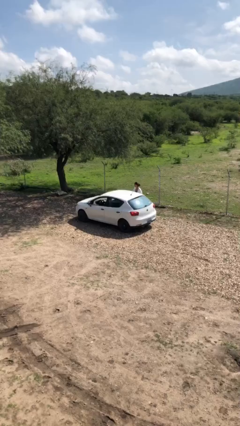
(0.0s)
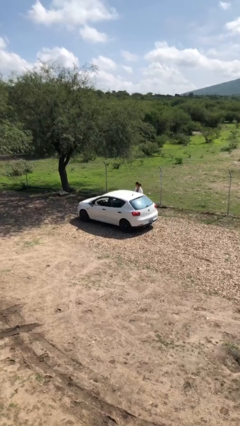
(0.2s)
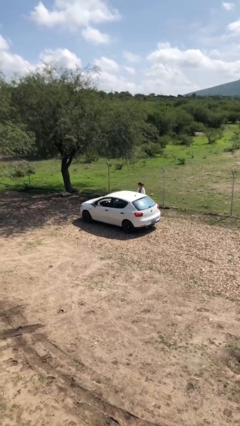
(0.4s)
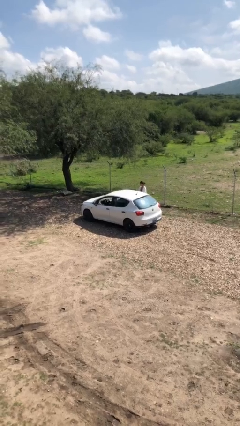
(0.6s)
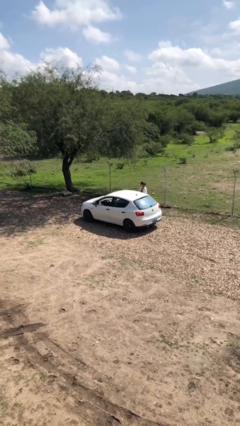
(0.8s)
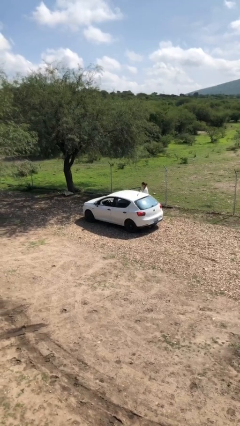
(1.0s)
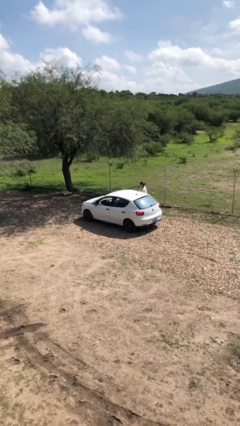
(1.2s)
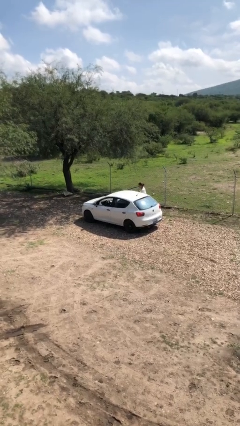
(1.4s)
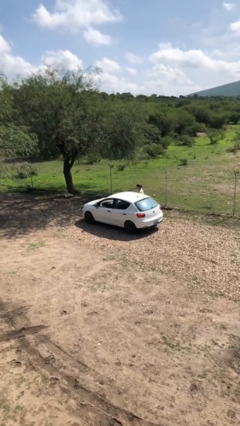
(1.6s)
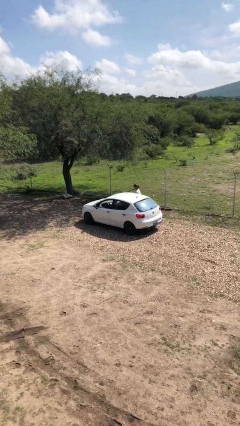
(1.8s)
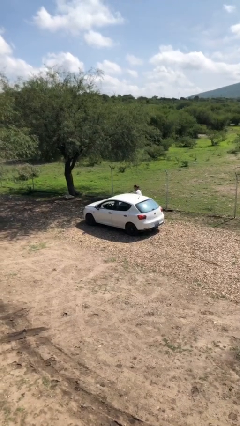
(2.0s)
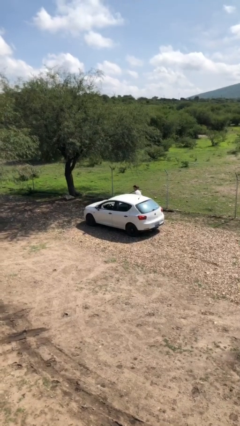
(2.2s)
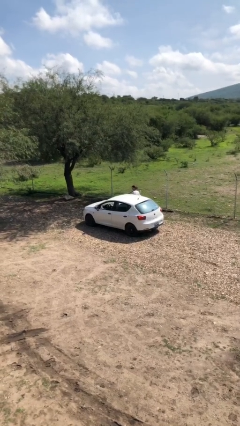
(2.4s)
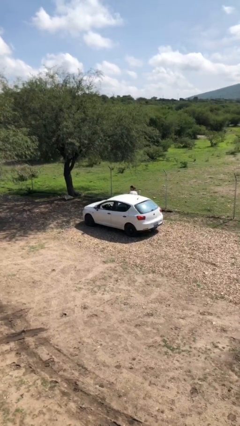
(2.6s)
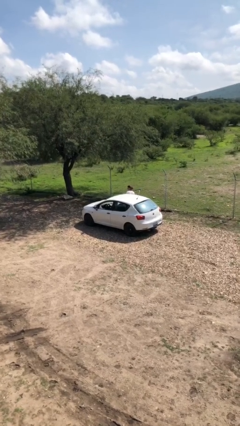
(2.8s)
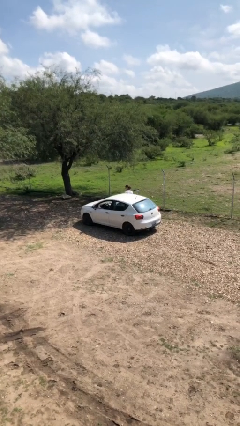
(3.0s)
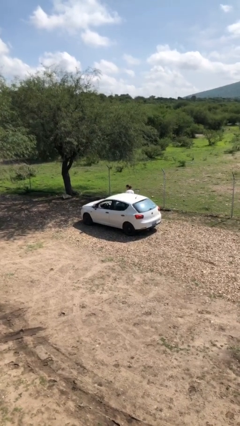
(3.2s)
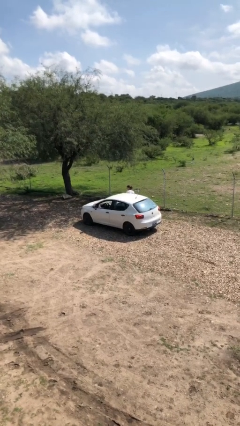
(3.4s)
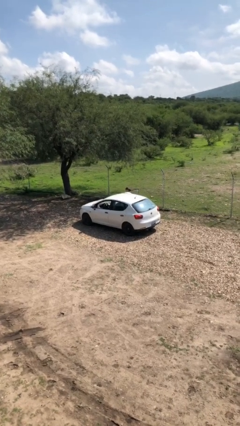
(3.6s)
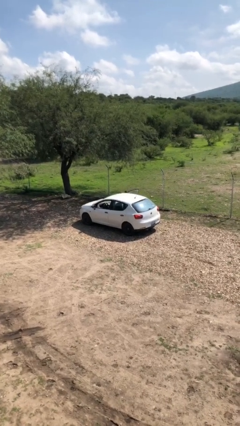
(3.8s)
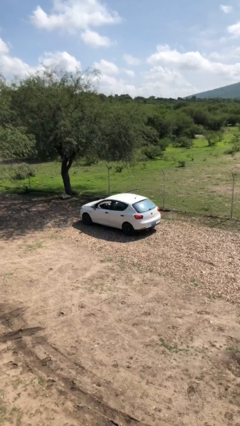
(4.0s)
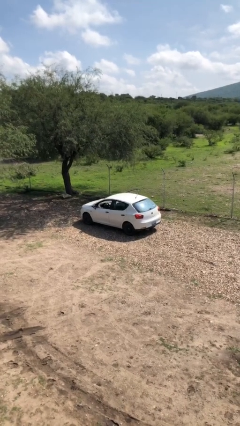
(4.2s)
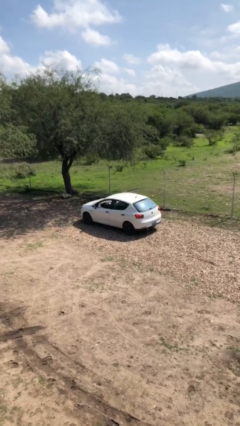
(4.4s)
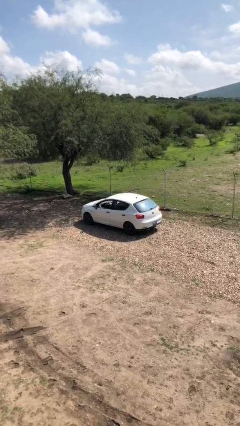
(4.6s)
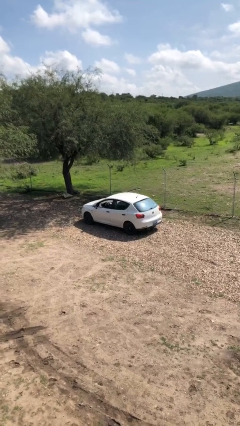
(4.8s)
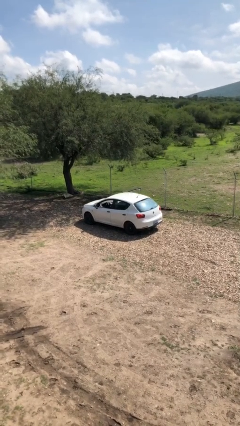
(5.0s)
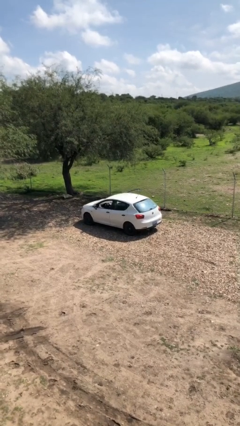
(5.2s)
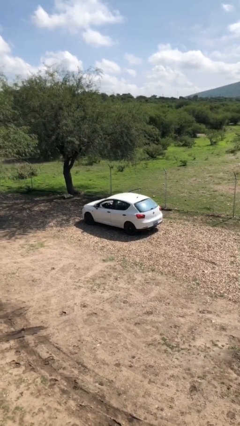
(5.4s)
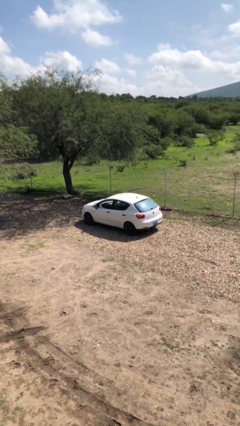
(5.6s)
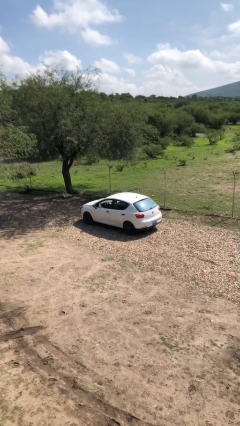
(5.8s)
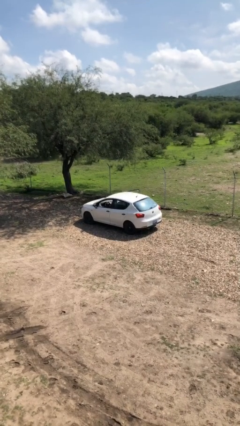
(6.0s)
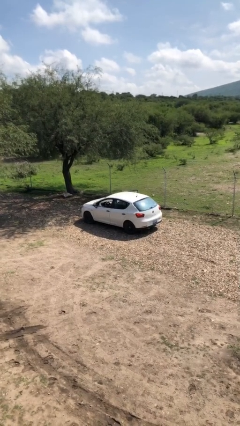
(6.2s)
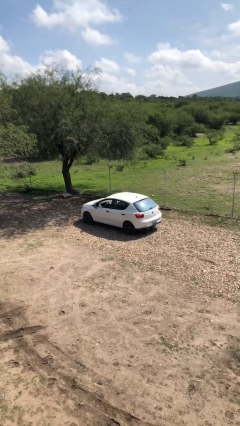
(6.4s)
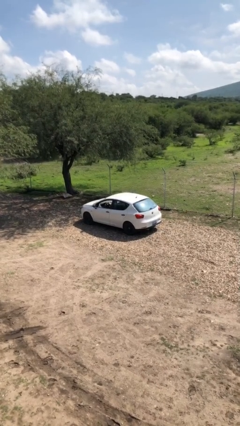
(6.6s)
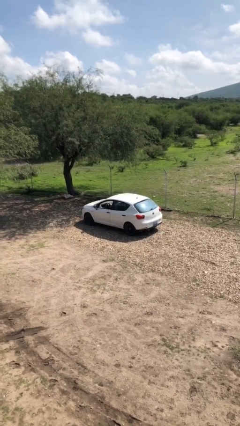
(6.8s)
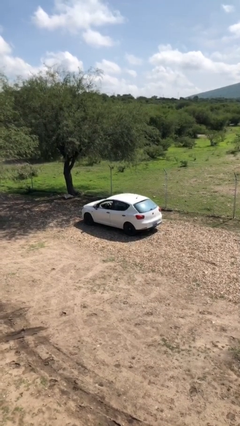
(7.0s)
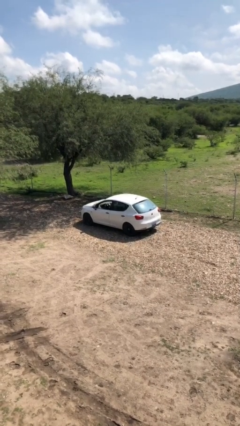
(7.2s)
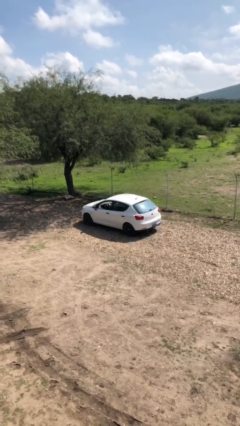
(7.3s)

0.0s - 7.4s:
car picks up person

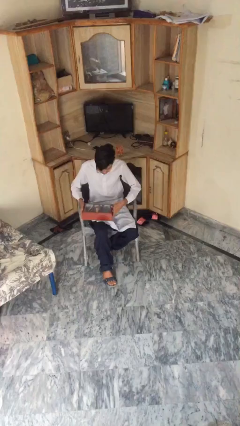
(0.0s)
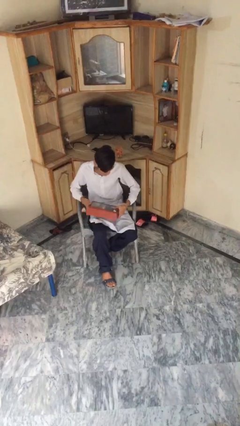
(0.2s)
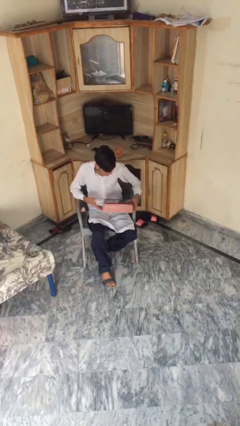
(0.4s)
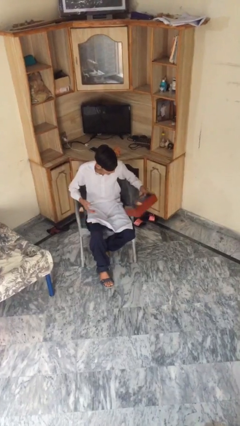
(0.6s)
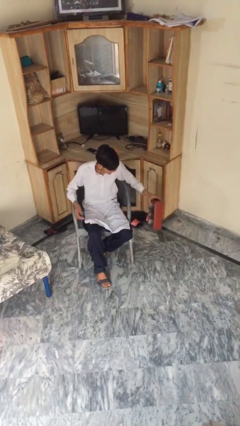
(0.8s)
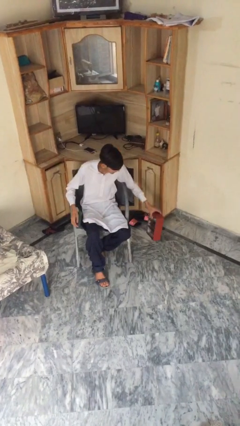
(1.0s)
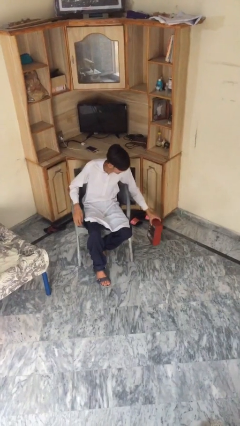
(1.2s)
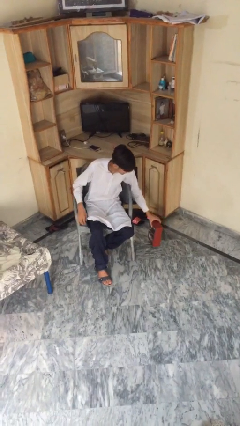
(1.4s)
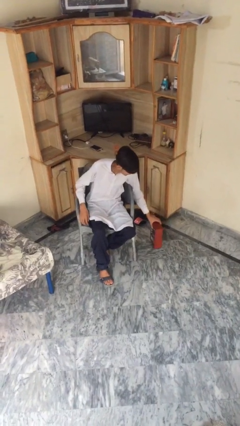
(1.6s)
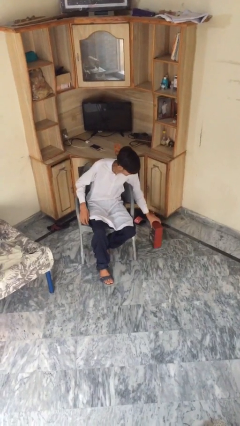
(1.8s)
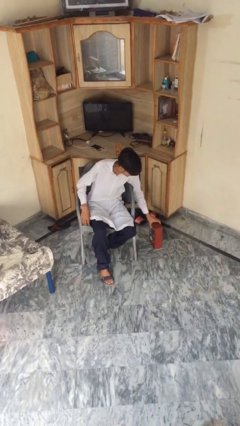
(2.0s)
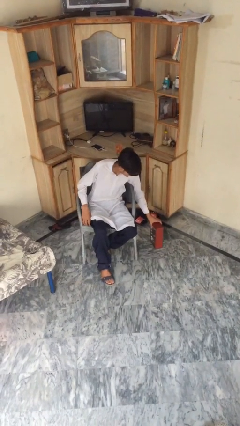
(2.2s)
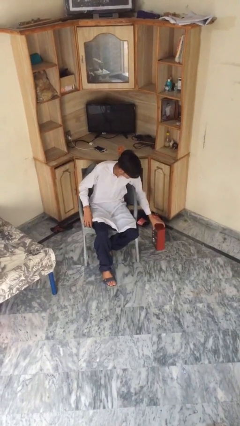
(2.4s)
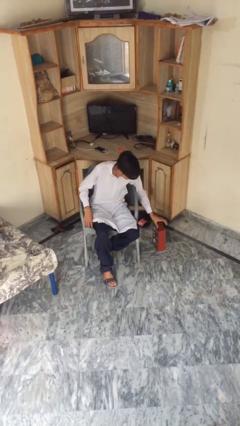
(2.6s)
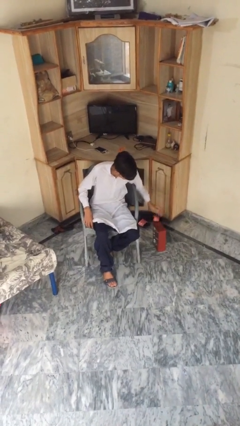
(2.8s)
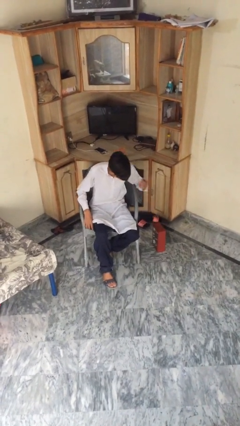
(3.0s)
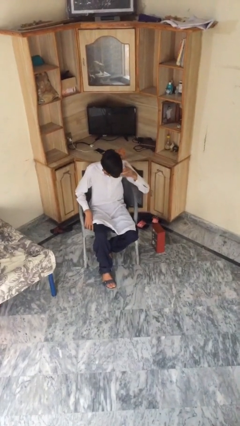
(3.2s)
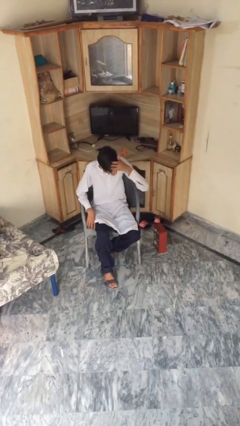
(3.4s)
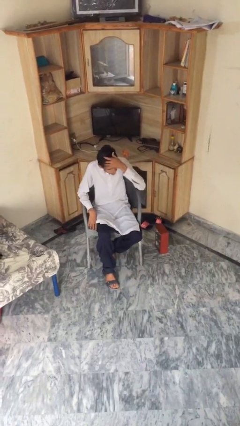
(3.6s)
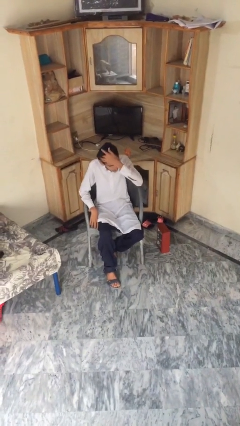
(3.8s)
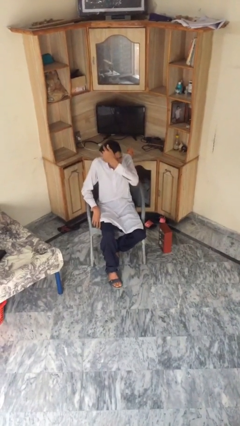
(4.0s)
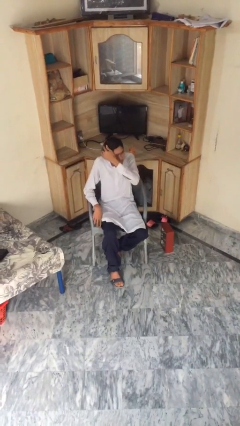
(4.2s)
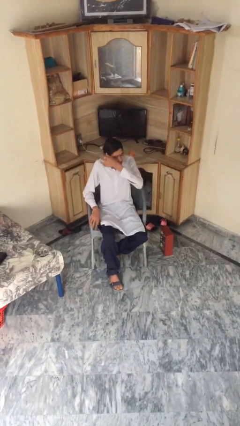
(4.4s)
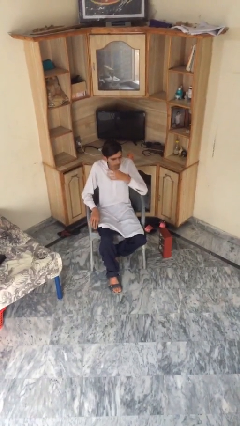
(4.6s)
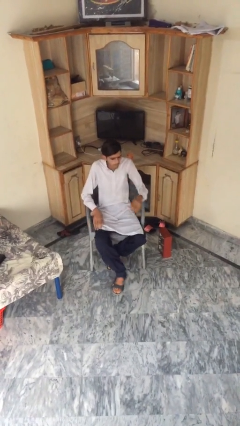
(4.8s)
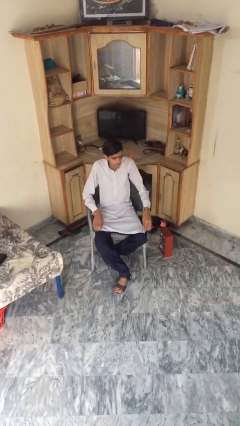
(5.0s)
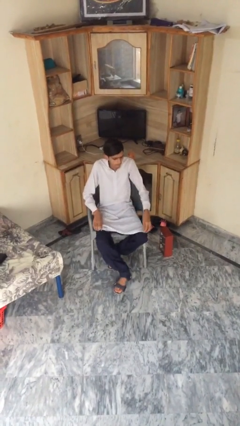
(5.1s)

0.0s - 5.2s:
person puts down object on floor

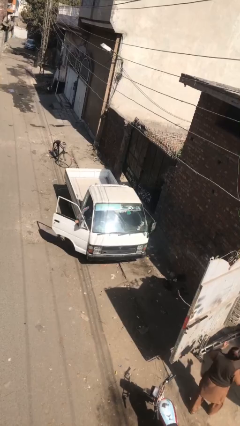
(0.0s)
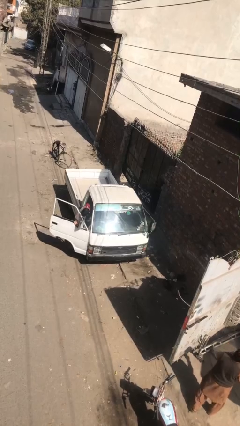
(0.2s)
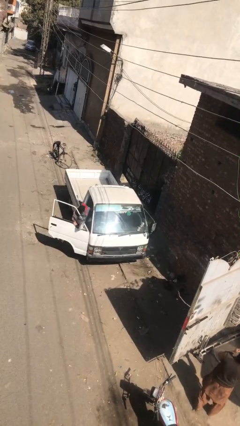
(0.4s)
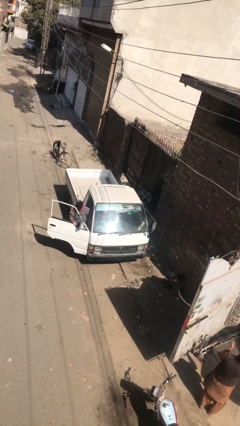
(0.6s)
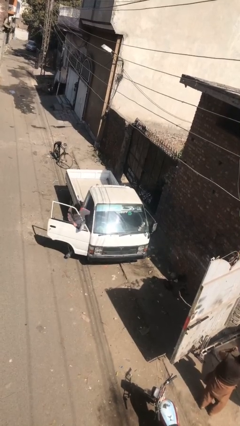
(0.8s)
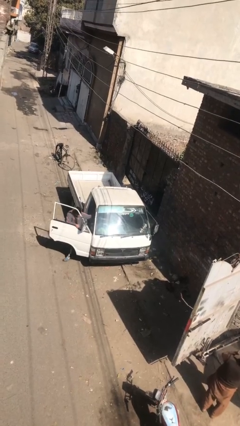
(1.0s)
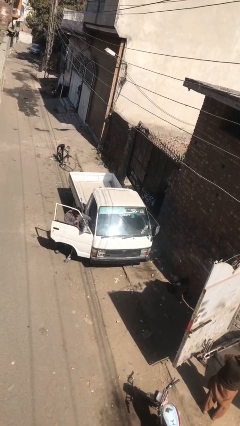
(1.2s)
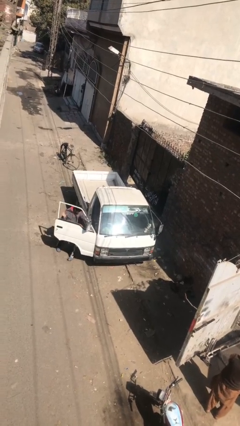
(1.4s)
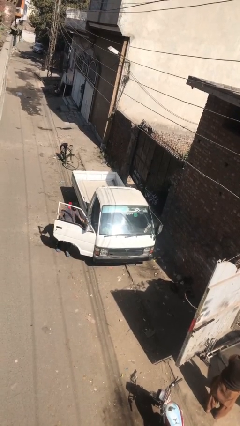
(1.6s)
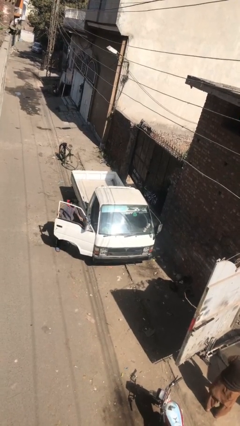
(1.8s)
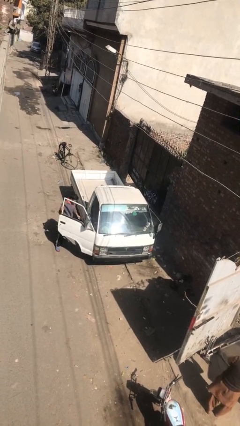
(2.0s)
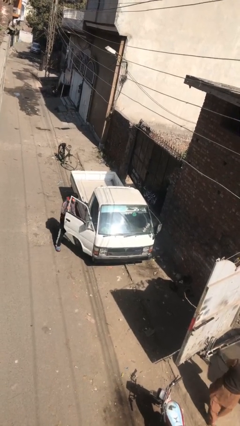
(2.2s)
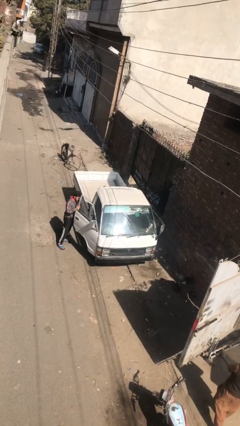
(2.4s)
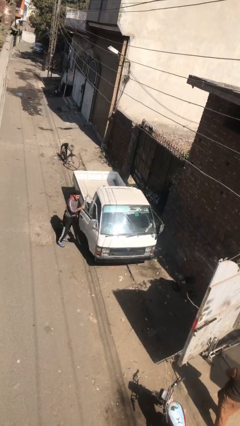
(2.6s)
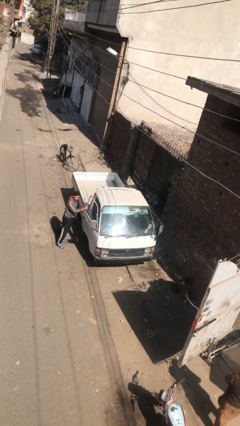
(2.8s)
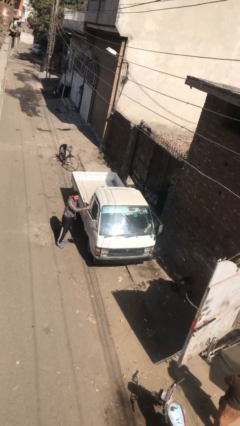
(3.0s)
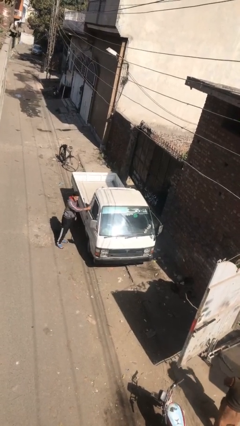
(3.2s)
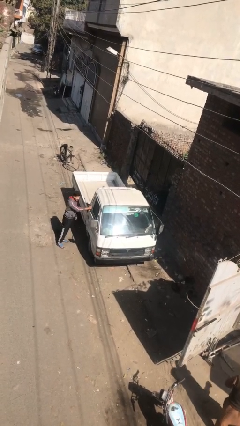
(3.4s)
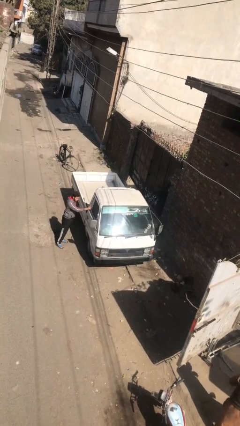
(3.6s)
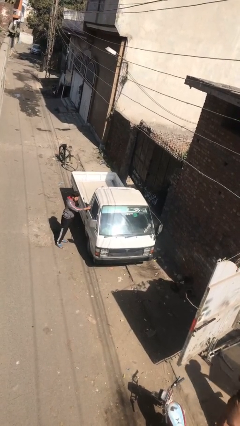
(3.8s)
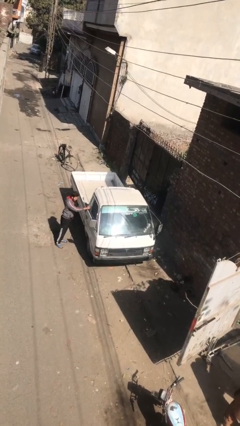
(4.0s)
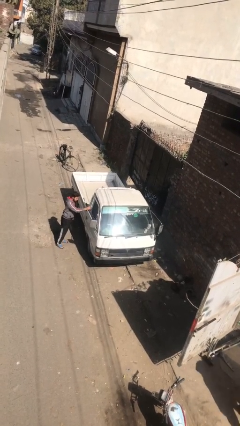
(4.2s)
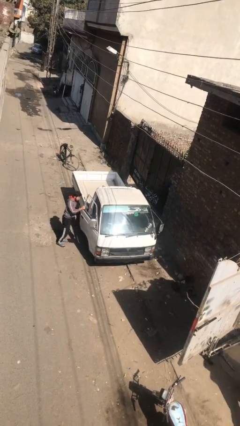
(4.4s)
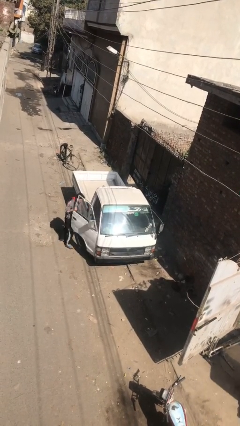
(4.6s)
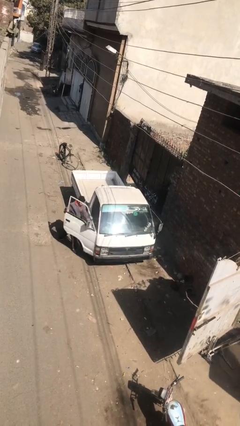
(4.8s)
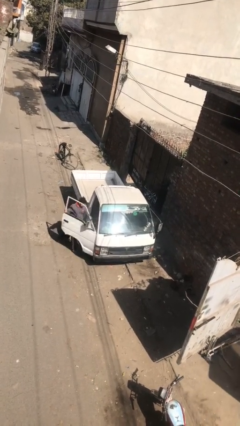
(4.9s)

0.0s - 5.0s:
car drops off person

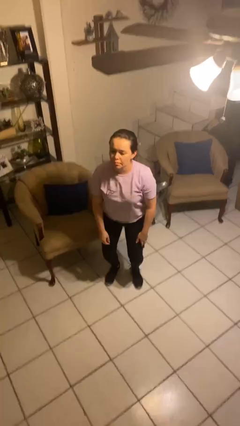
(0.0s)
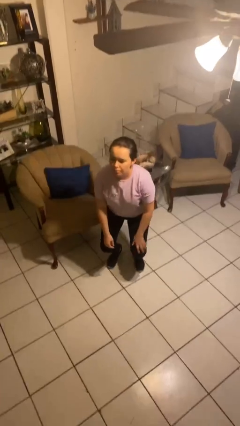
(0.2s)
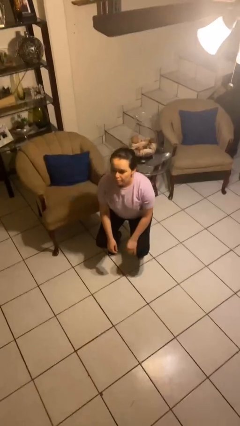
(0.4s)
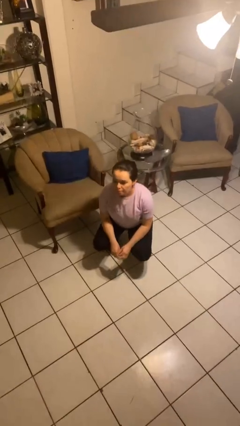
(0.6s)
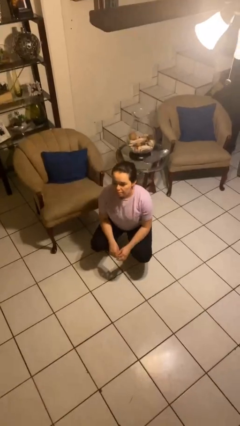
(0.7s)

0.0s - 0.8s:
person squats
